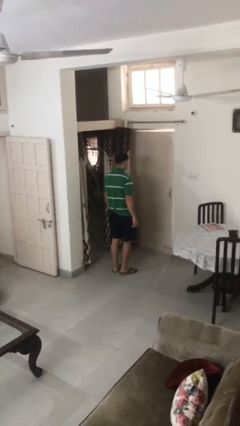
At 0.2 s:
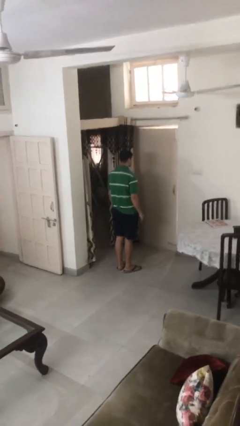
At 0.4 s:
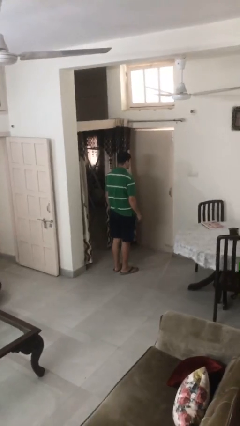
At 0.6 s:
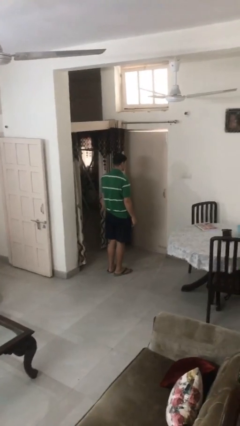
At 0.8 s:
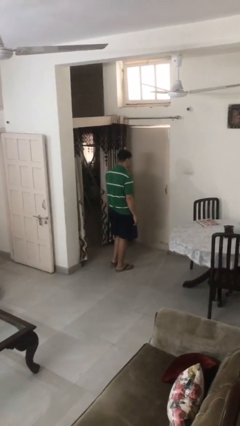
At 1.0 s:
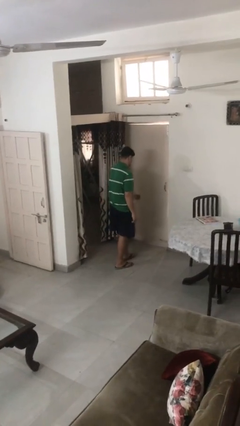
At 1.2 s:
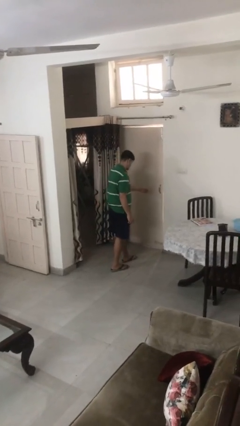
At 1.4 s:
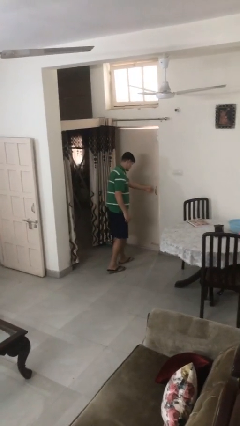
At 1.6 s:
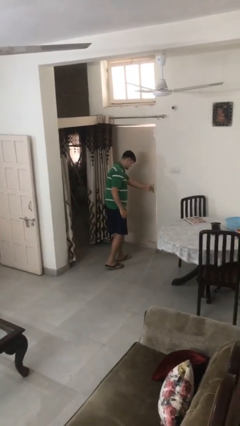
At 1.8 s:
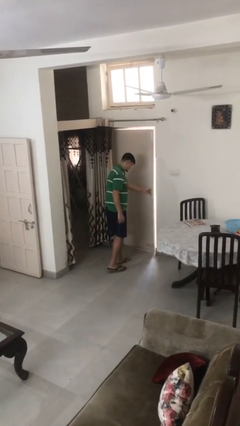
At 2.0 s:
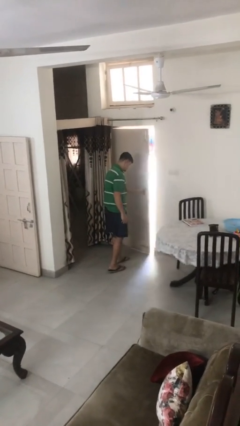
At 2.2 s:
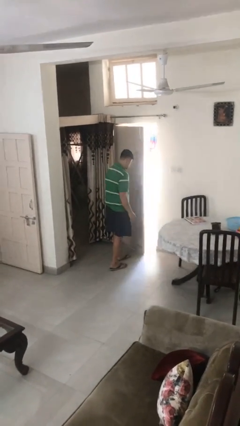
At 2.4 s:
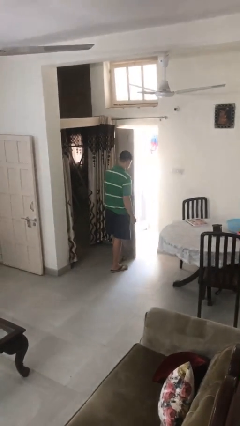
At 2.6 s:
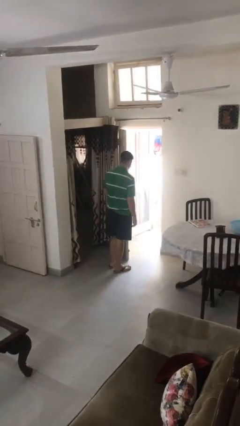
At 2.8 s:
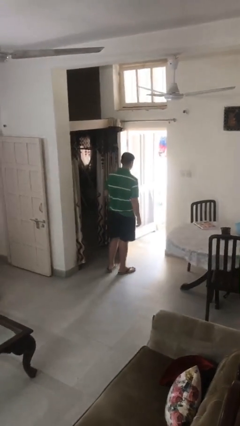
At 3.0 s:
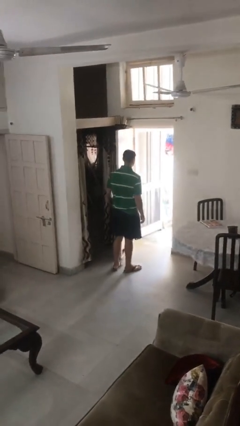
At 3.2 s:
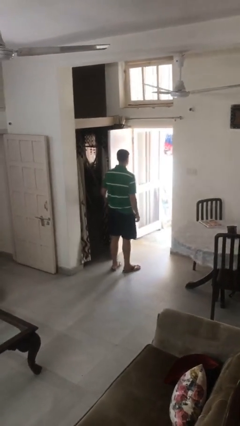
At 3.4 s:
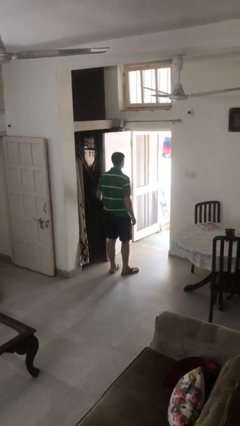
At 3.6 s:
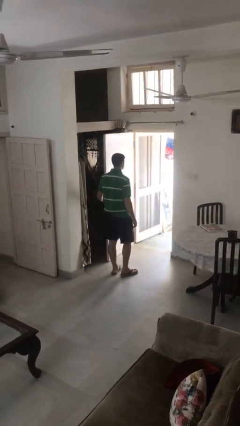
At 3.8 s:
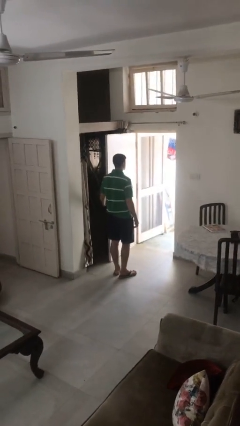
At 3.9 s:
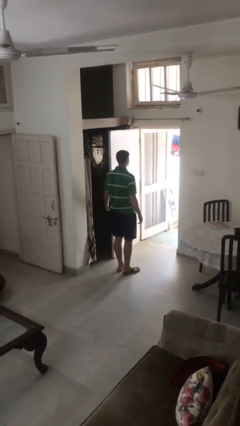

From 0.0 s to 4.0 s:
person opens facility door

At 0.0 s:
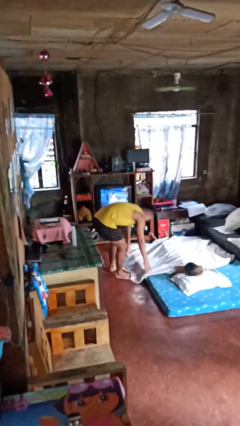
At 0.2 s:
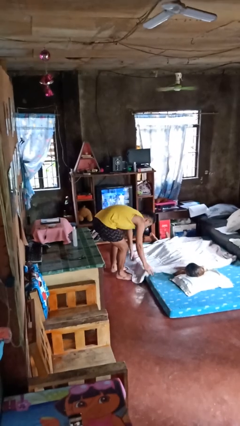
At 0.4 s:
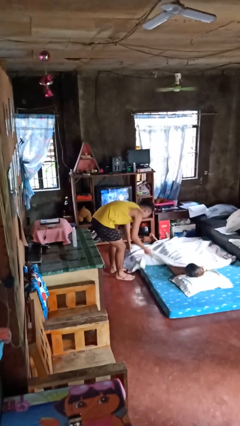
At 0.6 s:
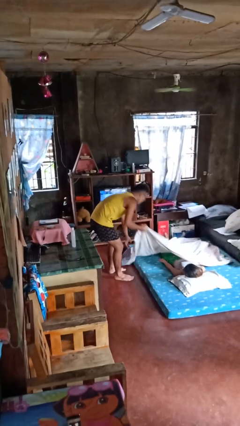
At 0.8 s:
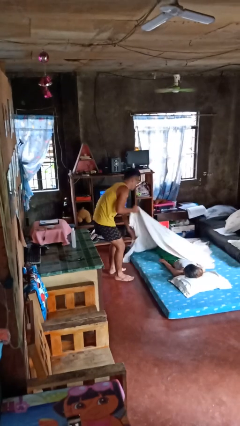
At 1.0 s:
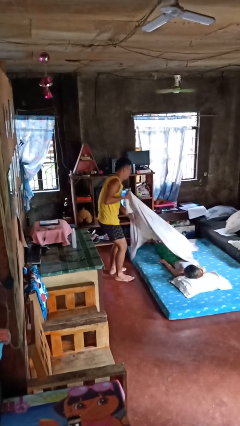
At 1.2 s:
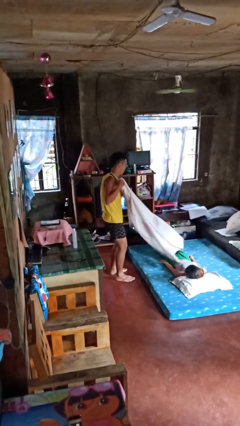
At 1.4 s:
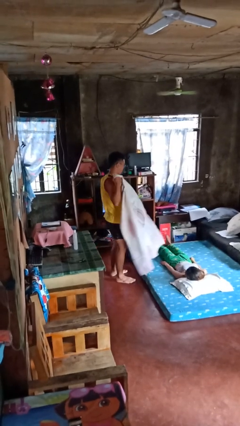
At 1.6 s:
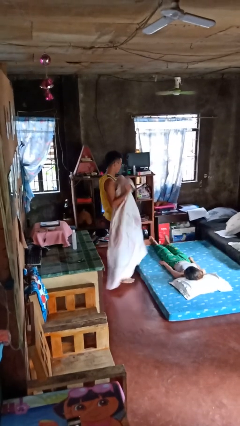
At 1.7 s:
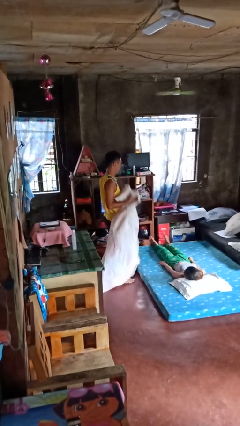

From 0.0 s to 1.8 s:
person uncovers friend with blanket

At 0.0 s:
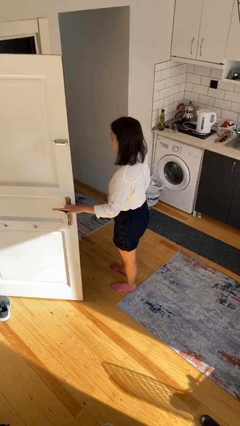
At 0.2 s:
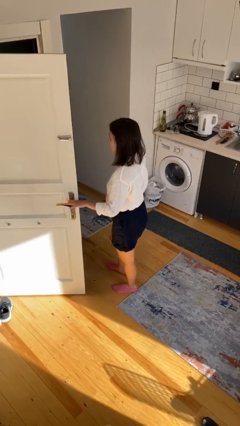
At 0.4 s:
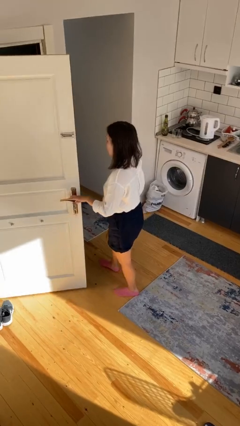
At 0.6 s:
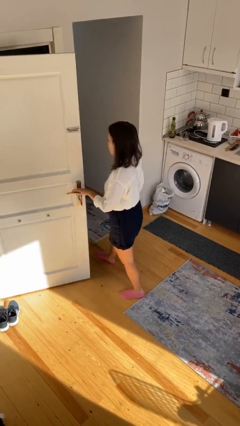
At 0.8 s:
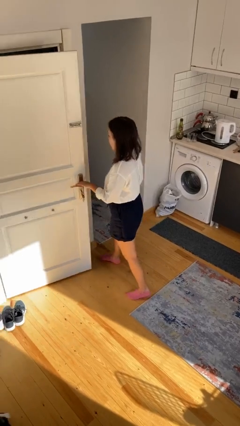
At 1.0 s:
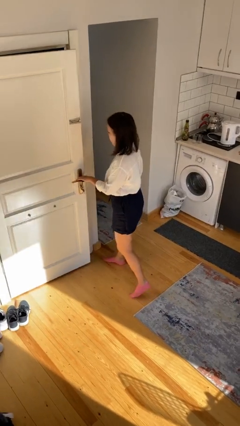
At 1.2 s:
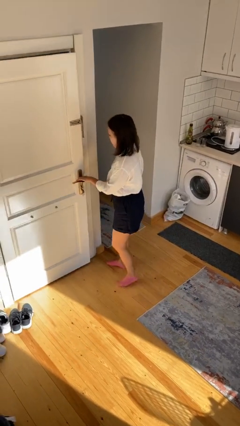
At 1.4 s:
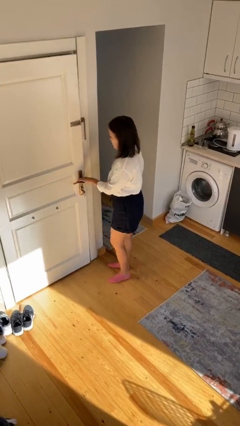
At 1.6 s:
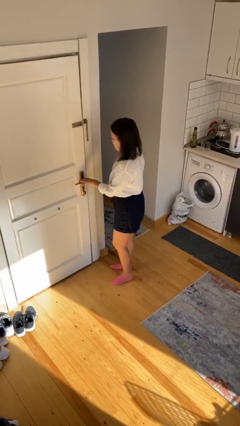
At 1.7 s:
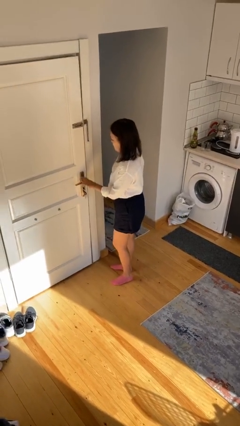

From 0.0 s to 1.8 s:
person closes facility door

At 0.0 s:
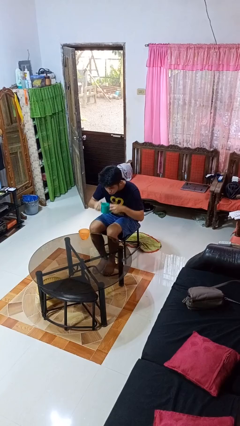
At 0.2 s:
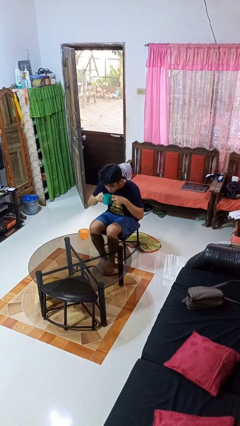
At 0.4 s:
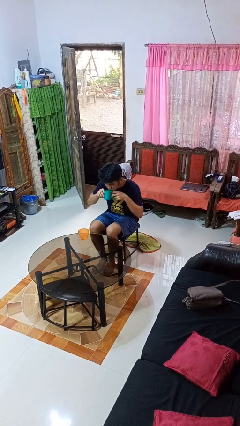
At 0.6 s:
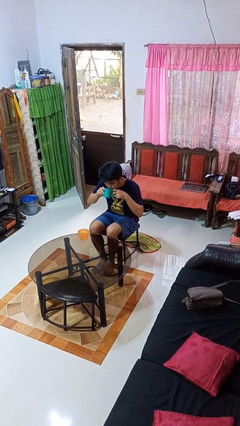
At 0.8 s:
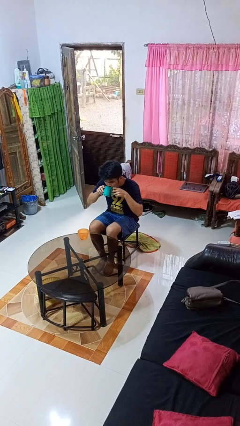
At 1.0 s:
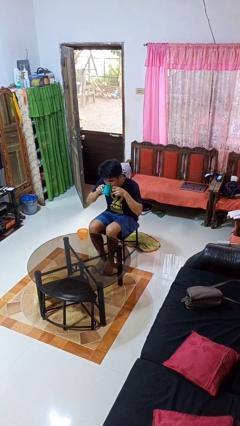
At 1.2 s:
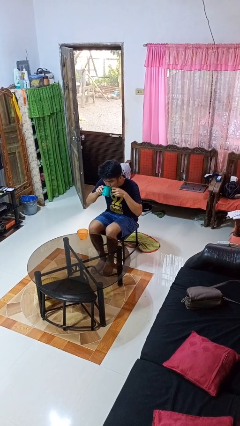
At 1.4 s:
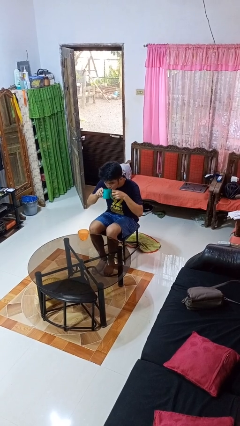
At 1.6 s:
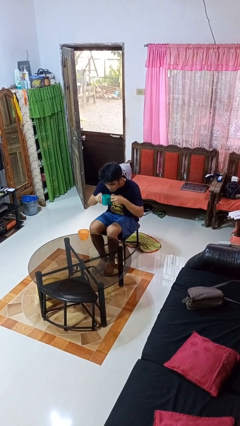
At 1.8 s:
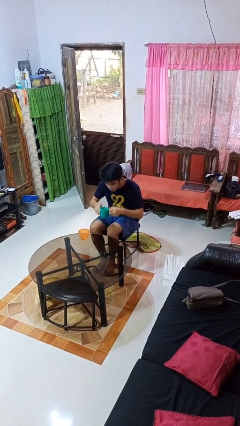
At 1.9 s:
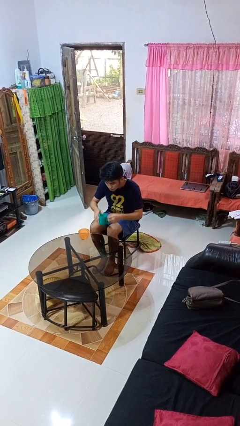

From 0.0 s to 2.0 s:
person drinks from cup

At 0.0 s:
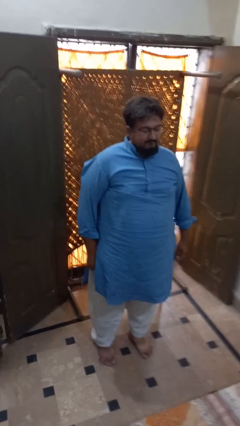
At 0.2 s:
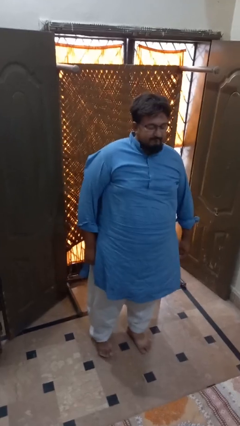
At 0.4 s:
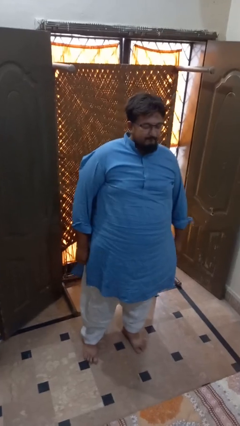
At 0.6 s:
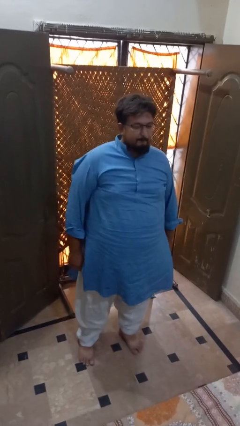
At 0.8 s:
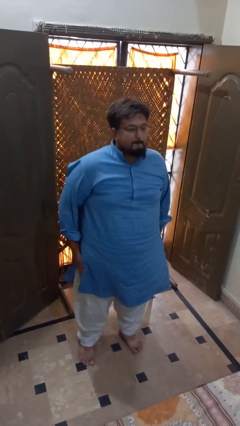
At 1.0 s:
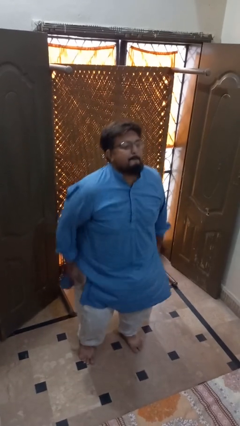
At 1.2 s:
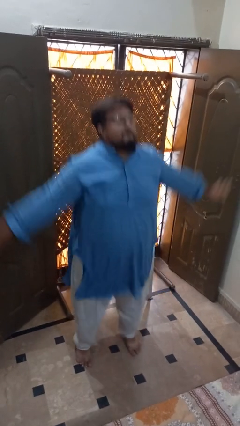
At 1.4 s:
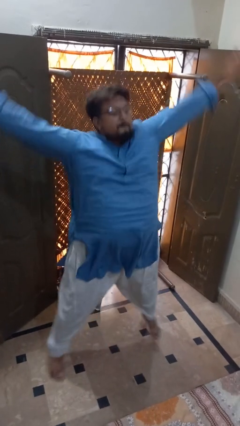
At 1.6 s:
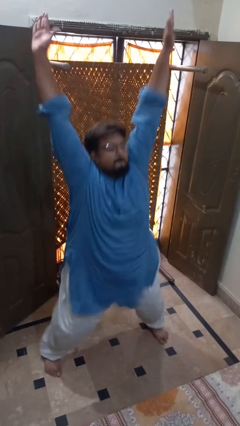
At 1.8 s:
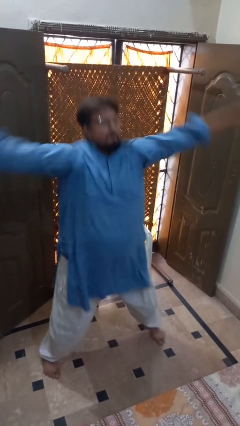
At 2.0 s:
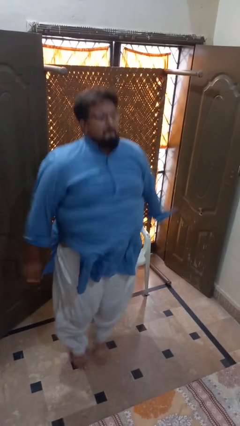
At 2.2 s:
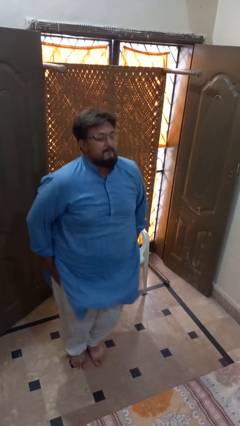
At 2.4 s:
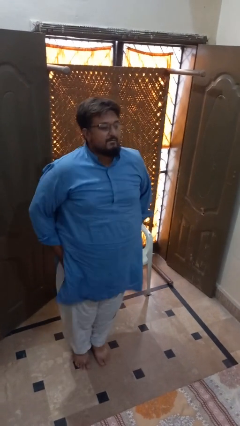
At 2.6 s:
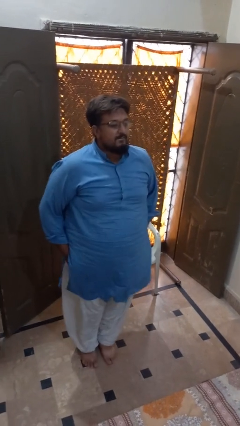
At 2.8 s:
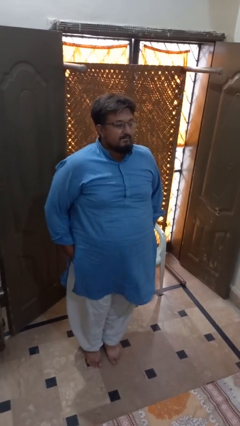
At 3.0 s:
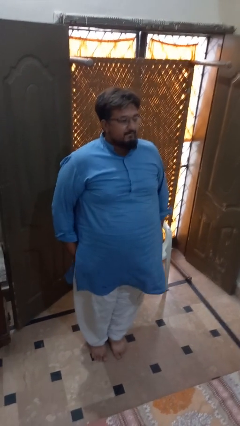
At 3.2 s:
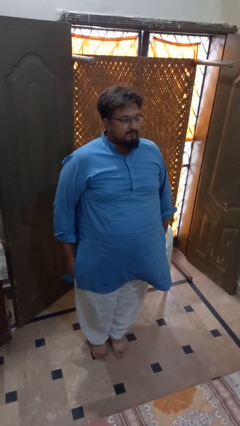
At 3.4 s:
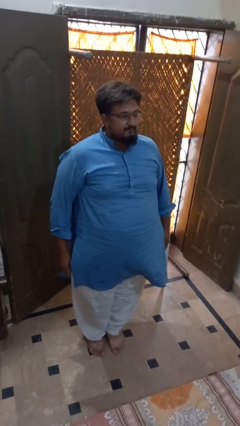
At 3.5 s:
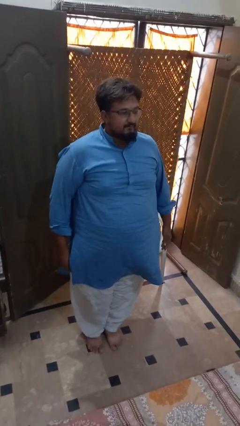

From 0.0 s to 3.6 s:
person exercises with jumping jacks

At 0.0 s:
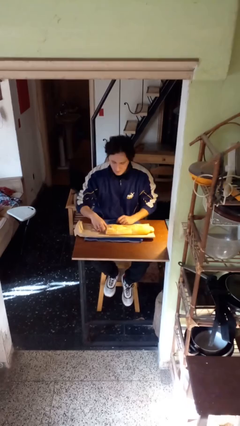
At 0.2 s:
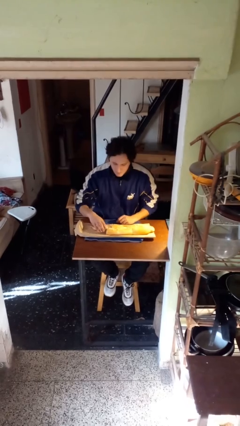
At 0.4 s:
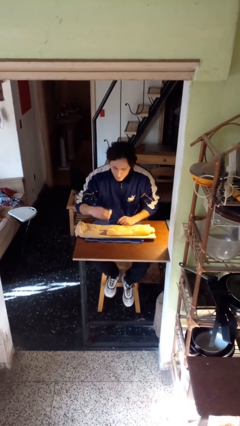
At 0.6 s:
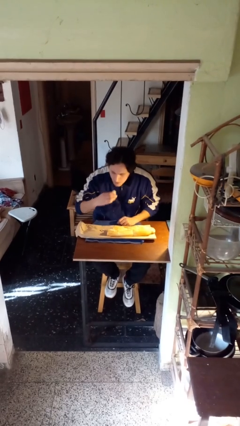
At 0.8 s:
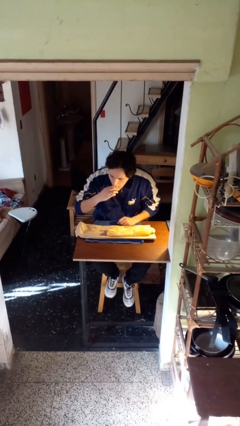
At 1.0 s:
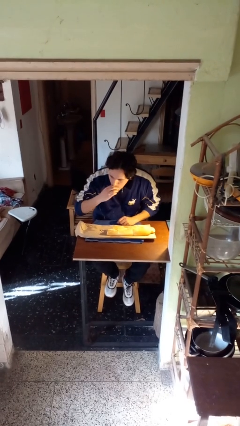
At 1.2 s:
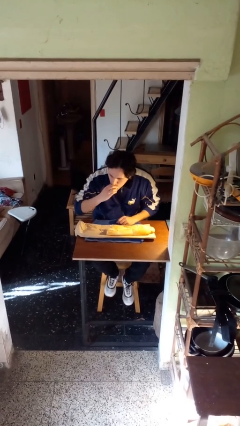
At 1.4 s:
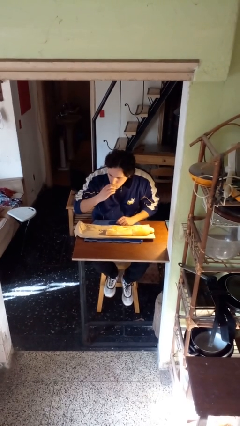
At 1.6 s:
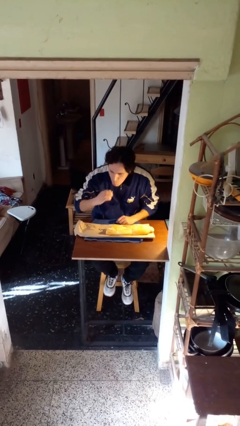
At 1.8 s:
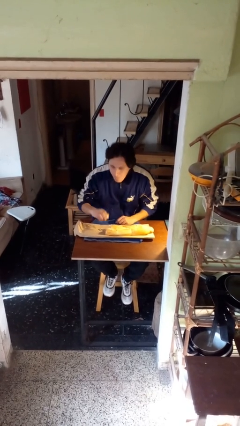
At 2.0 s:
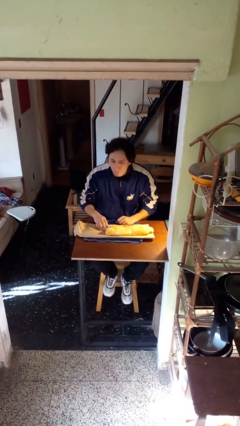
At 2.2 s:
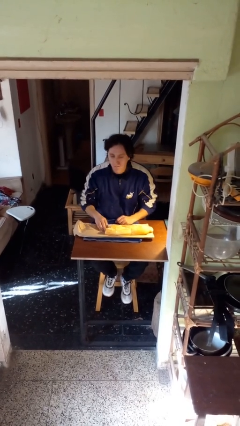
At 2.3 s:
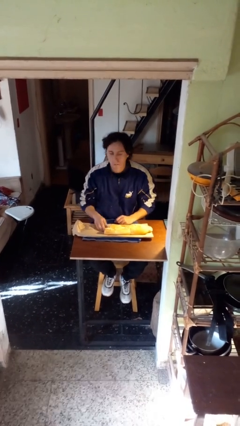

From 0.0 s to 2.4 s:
person eats with hands

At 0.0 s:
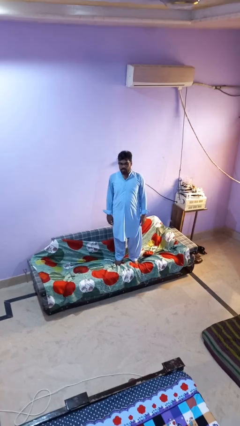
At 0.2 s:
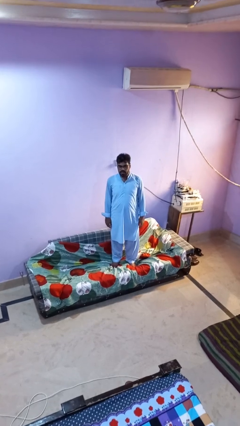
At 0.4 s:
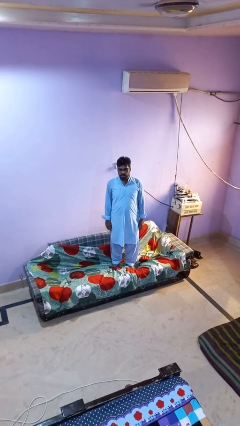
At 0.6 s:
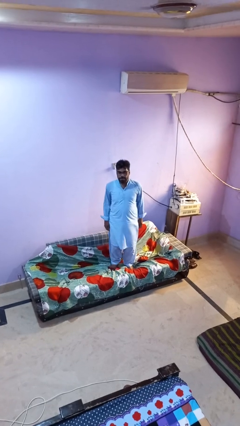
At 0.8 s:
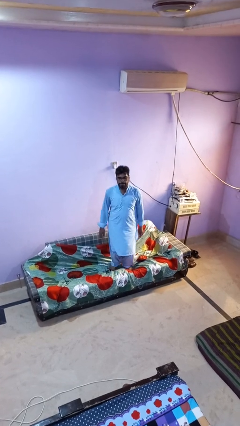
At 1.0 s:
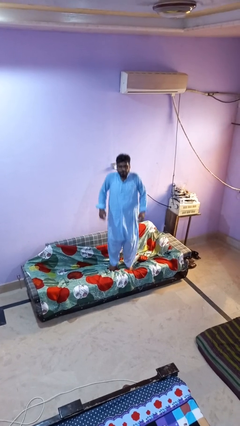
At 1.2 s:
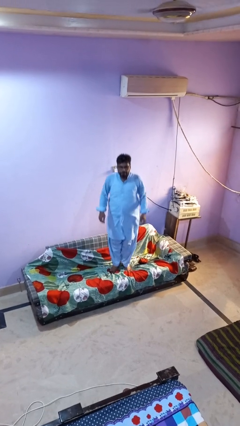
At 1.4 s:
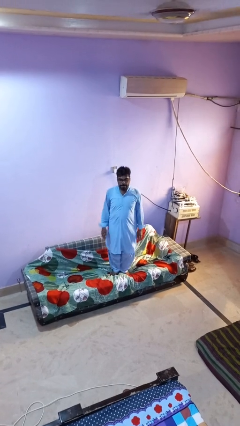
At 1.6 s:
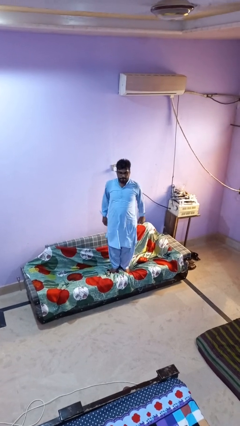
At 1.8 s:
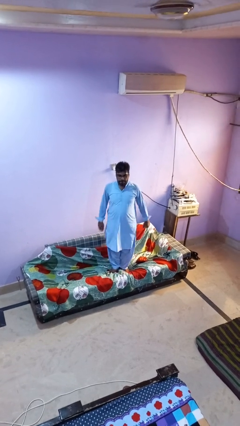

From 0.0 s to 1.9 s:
person jumps on couch
